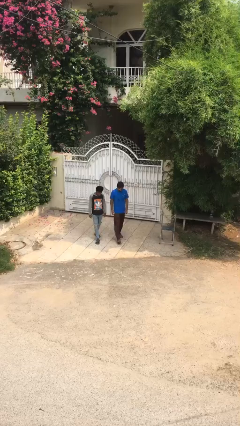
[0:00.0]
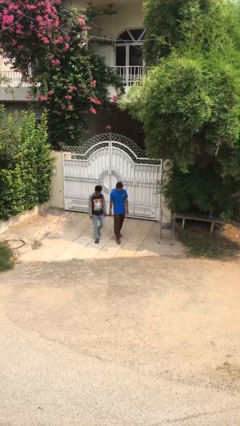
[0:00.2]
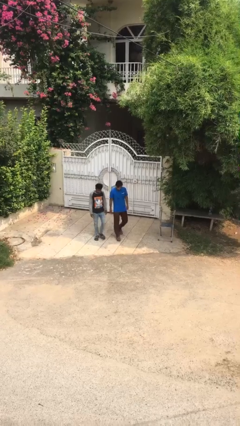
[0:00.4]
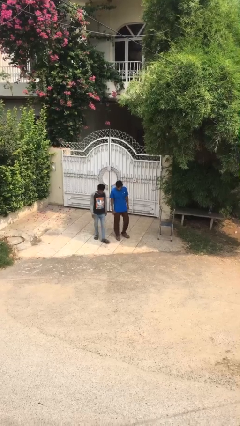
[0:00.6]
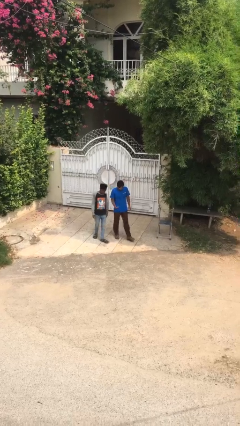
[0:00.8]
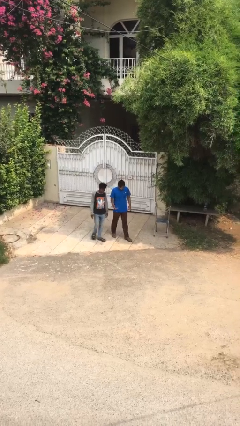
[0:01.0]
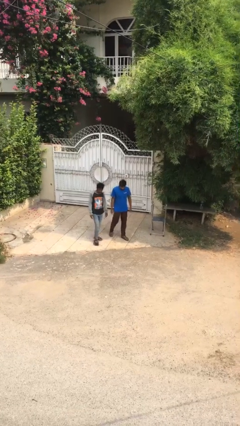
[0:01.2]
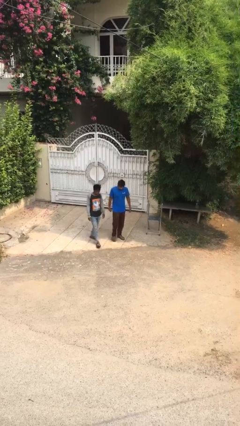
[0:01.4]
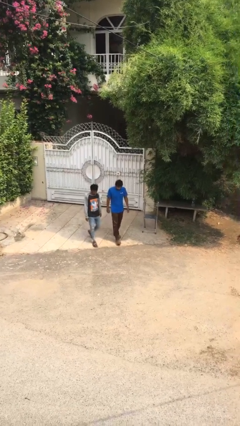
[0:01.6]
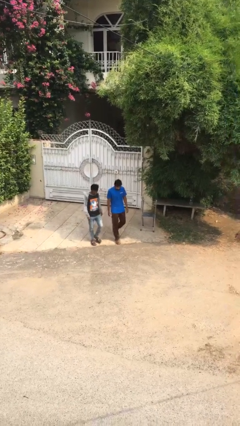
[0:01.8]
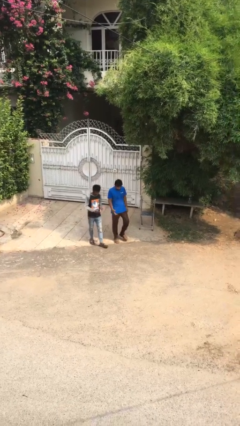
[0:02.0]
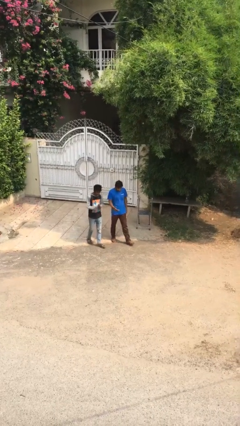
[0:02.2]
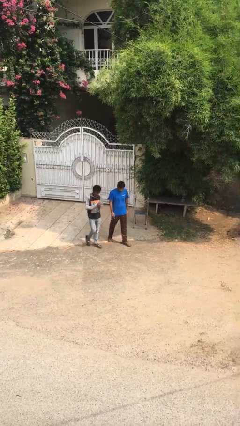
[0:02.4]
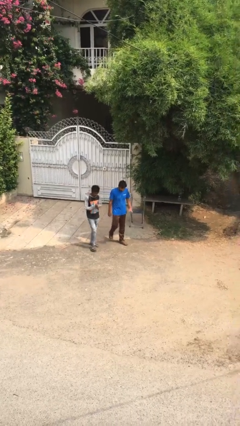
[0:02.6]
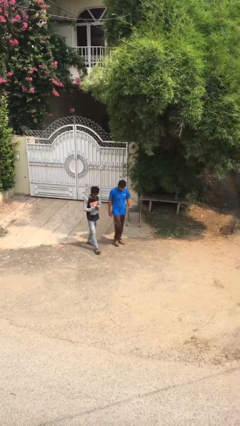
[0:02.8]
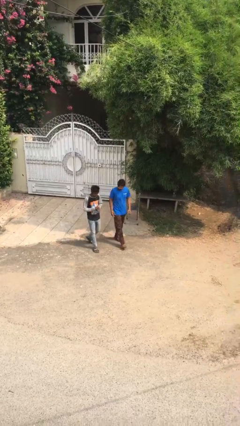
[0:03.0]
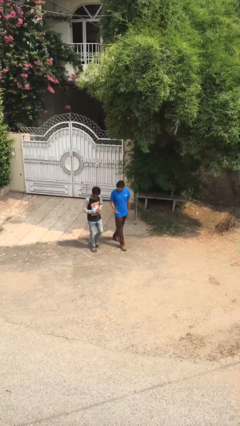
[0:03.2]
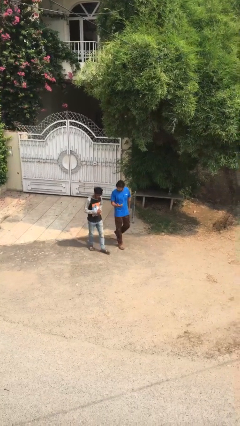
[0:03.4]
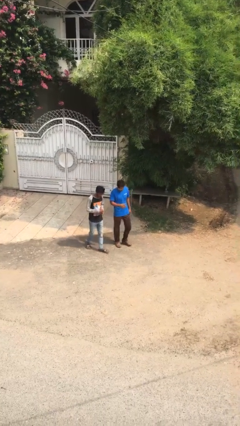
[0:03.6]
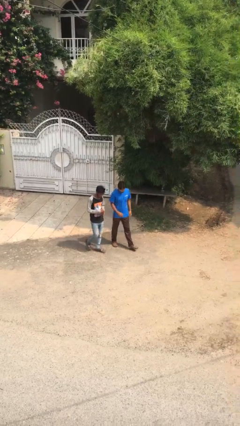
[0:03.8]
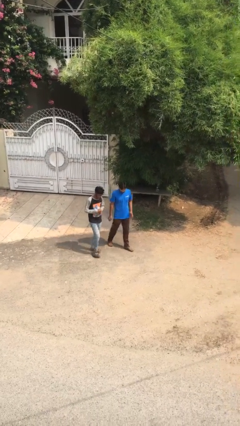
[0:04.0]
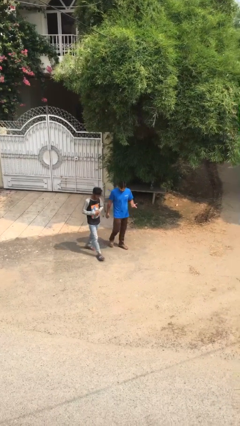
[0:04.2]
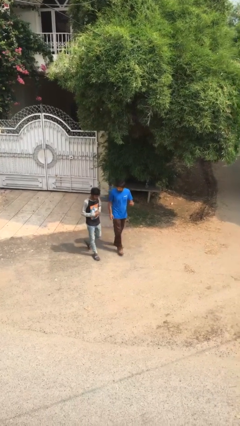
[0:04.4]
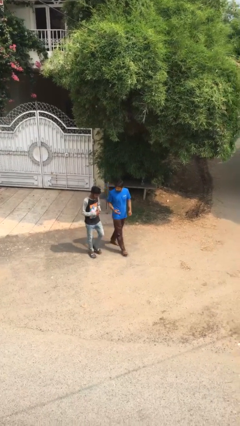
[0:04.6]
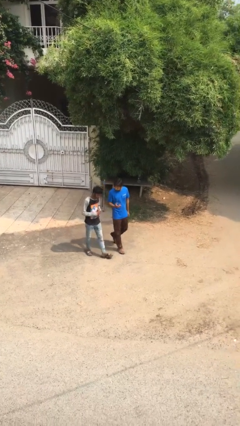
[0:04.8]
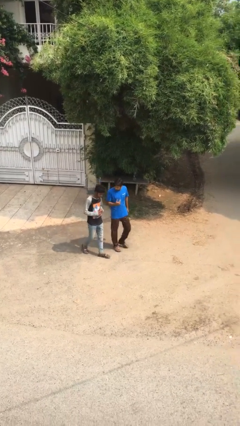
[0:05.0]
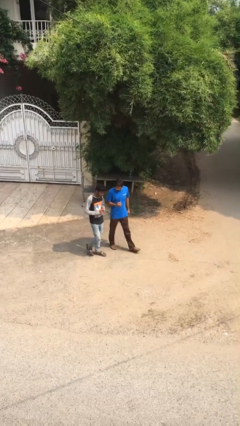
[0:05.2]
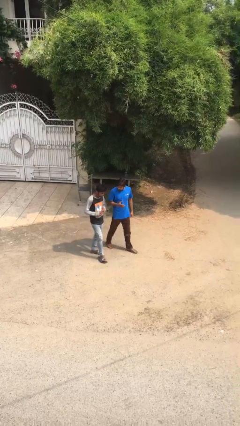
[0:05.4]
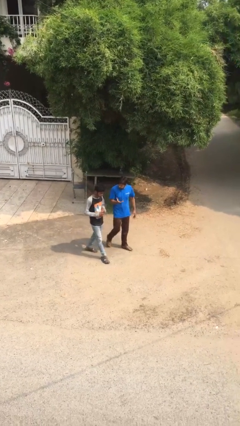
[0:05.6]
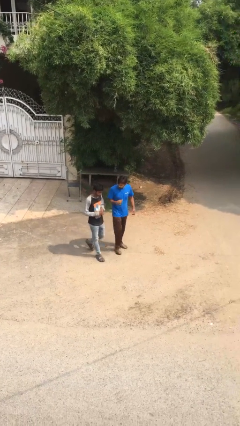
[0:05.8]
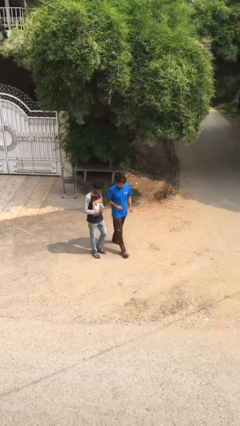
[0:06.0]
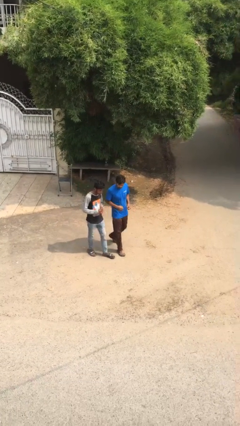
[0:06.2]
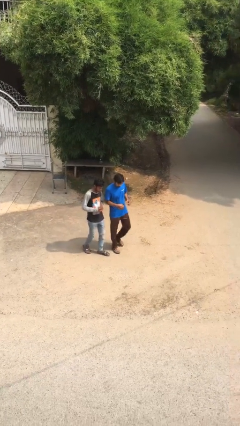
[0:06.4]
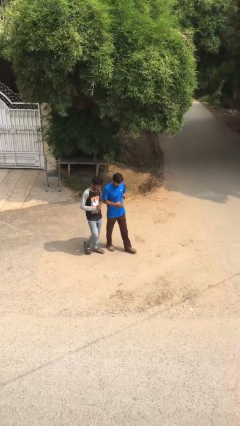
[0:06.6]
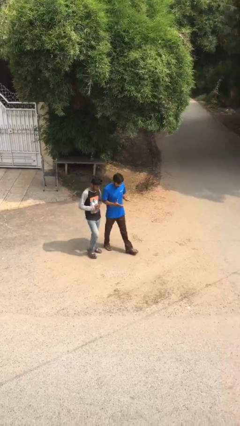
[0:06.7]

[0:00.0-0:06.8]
person talks to person

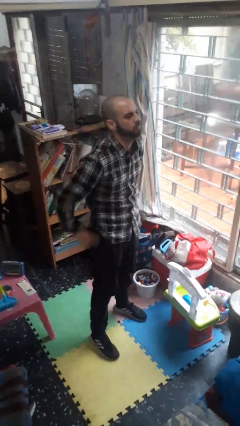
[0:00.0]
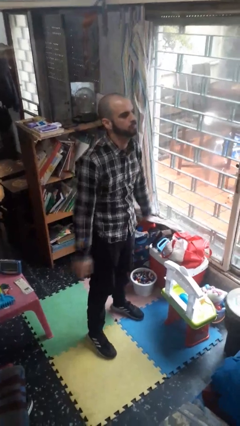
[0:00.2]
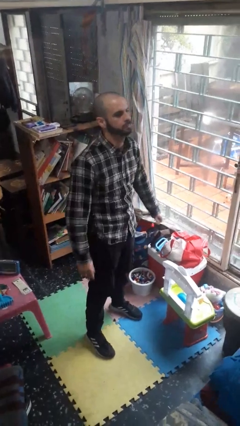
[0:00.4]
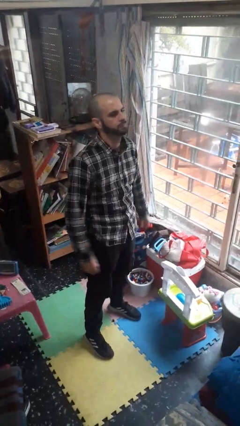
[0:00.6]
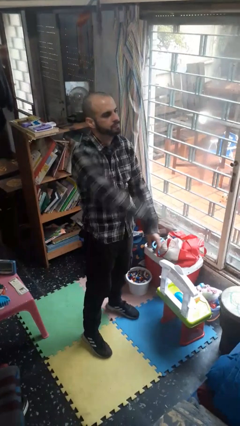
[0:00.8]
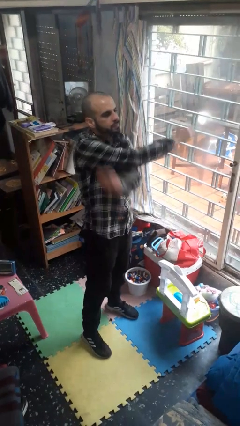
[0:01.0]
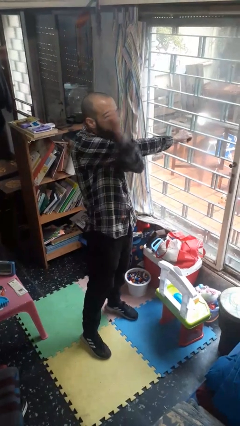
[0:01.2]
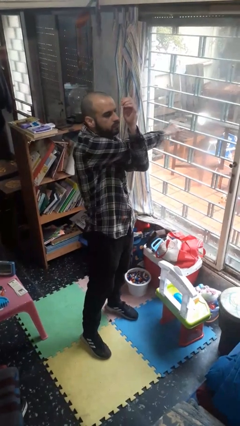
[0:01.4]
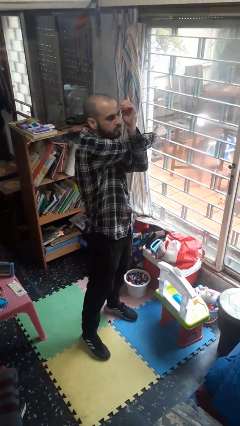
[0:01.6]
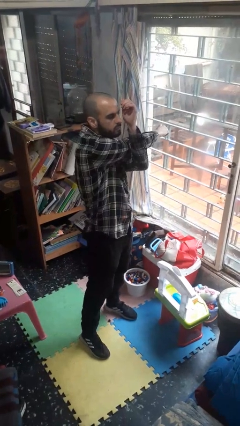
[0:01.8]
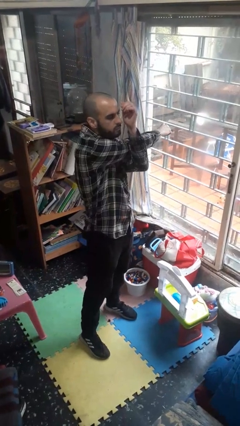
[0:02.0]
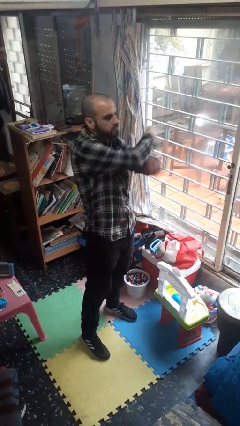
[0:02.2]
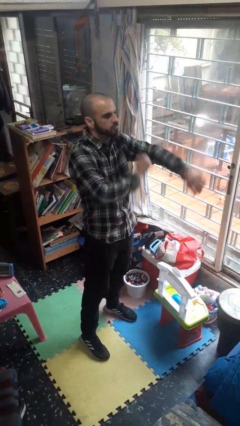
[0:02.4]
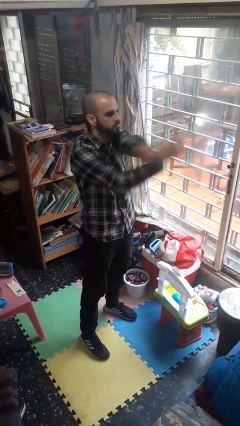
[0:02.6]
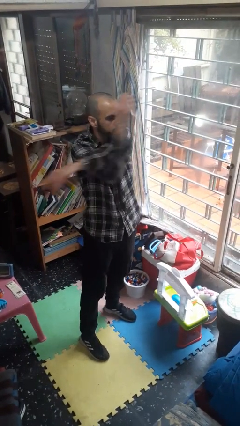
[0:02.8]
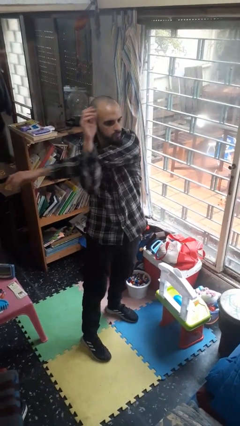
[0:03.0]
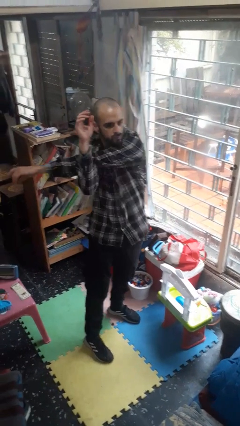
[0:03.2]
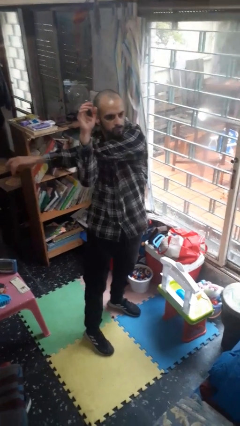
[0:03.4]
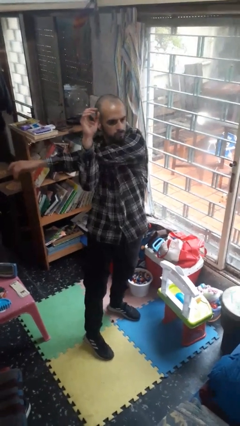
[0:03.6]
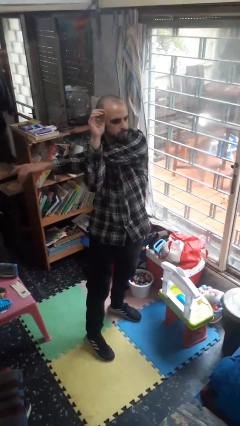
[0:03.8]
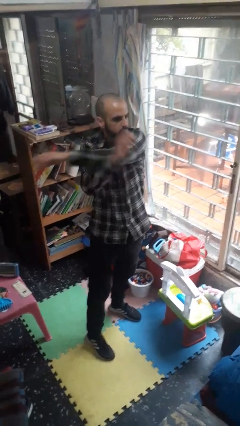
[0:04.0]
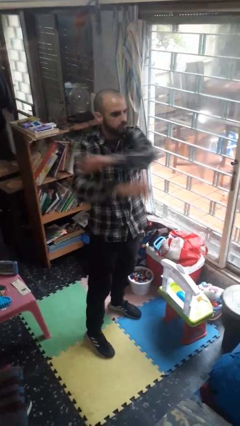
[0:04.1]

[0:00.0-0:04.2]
person stretches arms to side

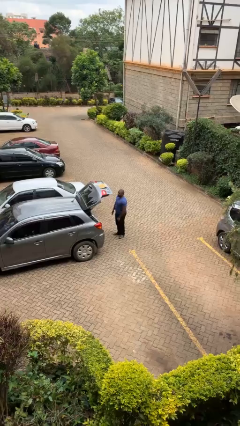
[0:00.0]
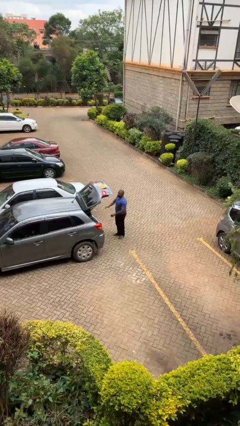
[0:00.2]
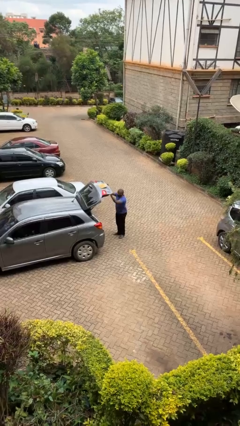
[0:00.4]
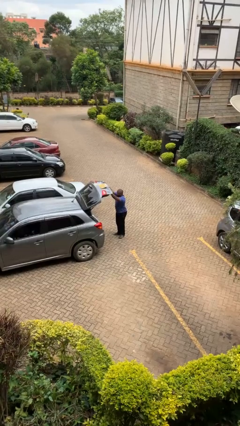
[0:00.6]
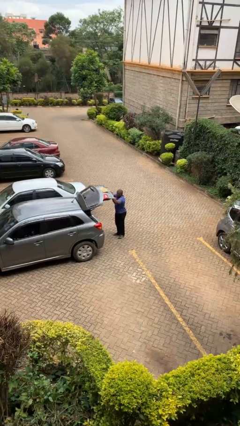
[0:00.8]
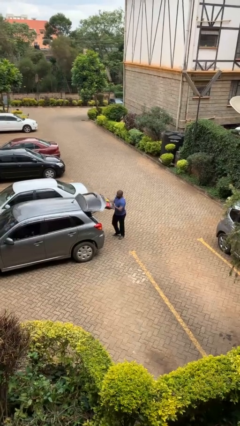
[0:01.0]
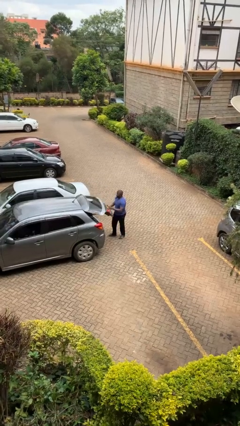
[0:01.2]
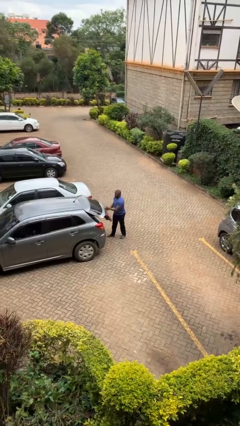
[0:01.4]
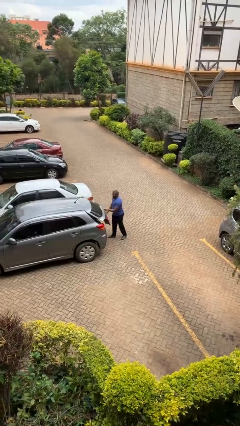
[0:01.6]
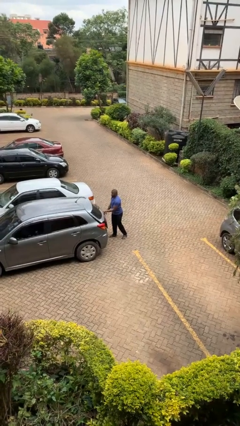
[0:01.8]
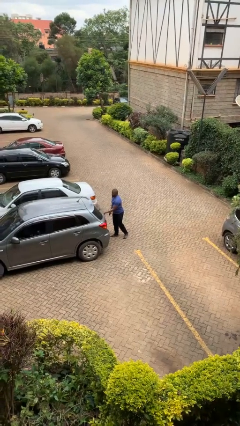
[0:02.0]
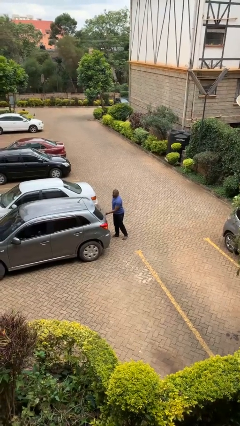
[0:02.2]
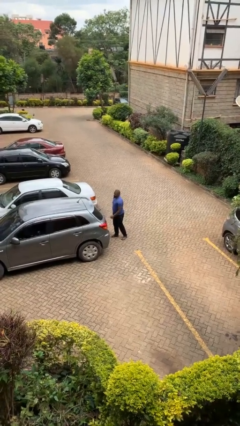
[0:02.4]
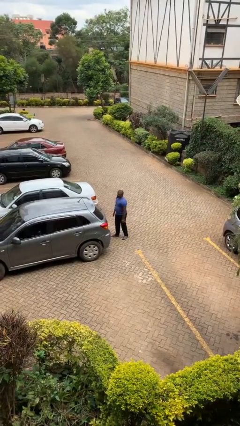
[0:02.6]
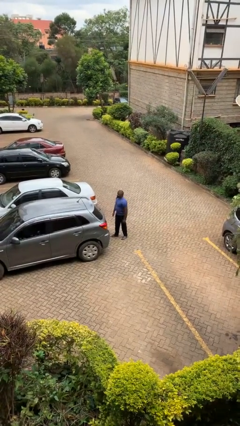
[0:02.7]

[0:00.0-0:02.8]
person closes car trunk

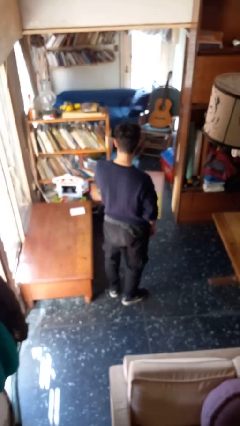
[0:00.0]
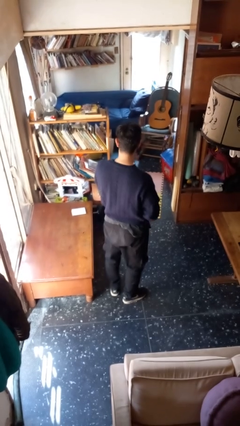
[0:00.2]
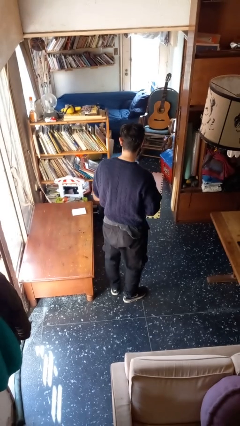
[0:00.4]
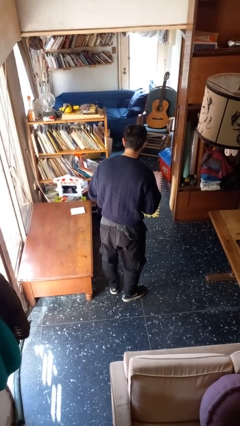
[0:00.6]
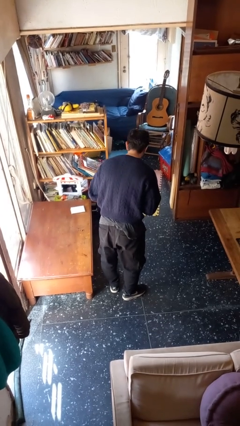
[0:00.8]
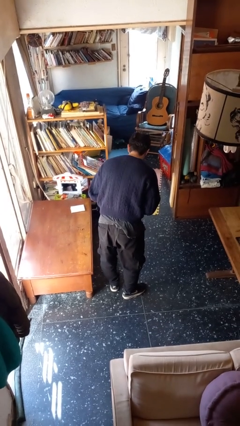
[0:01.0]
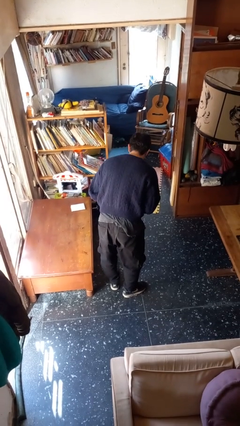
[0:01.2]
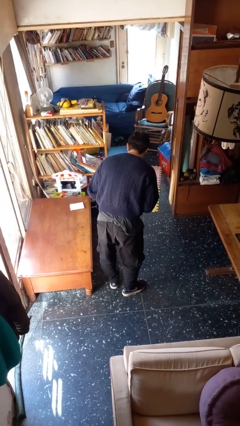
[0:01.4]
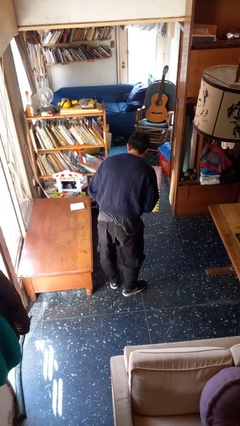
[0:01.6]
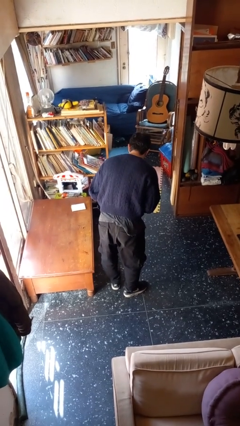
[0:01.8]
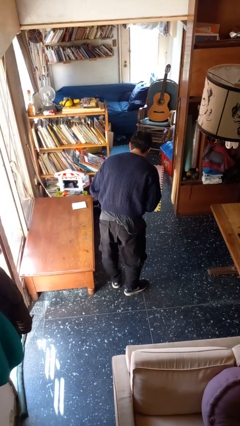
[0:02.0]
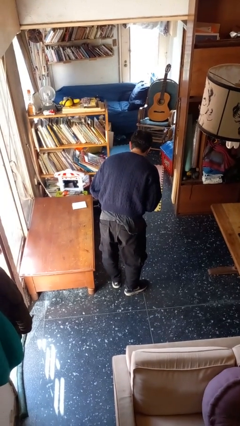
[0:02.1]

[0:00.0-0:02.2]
person bows

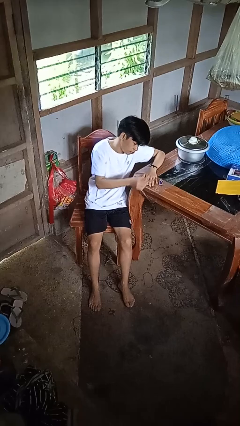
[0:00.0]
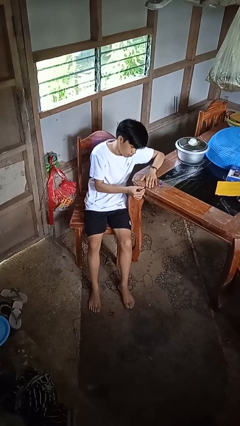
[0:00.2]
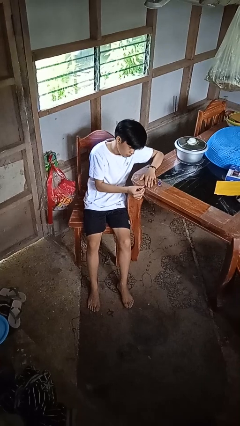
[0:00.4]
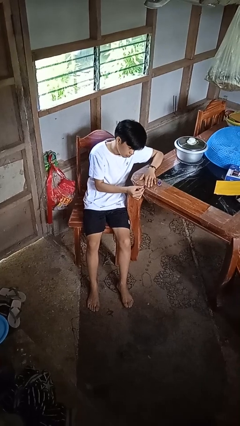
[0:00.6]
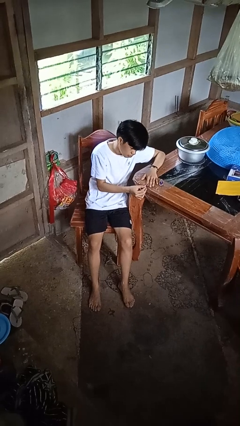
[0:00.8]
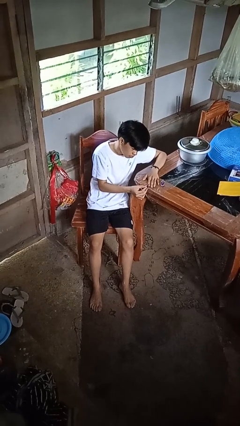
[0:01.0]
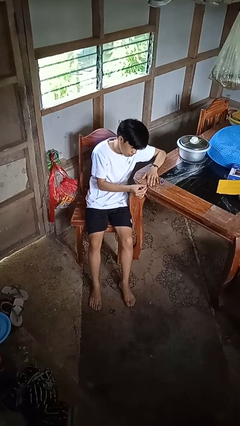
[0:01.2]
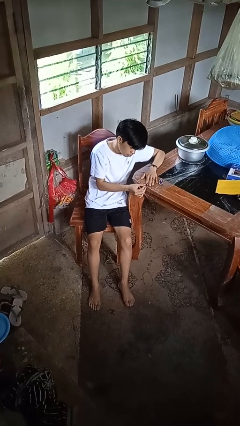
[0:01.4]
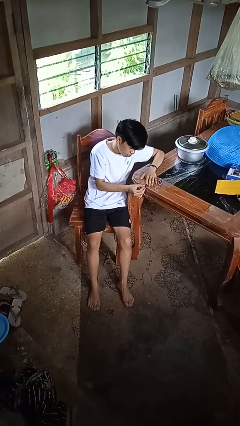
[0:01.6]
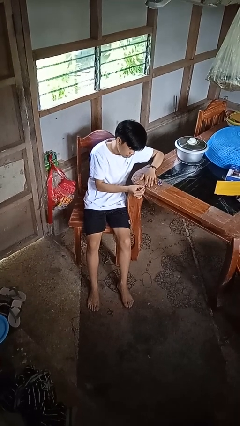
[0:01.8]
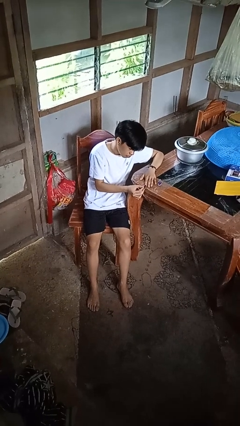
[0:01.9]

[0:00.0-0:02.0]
person paints fingernails
